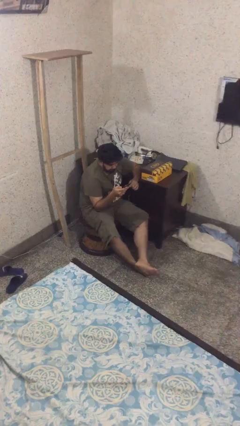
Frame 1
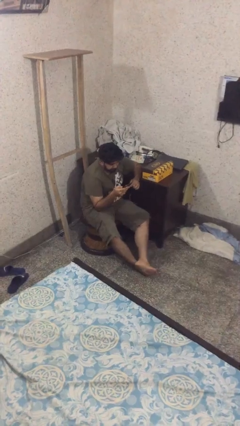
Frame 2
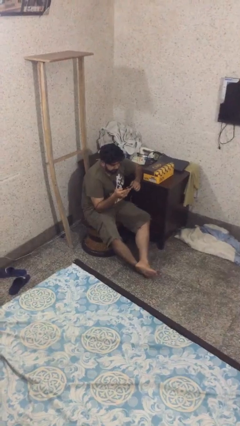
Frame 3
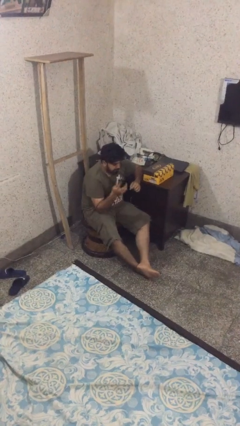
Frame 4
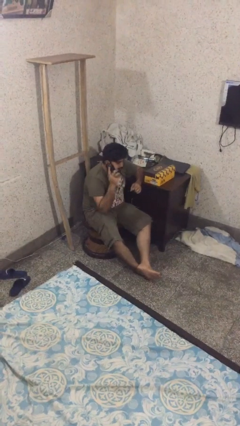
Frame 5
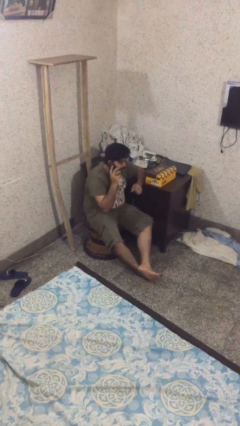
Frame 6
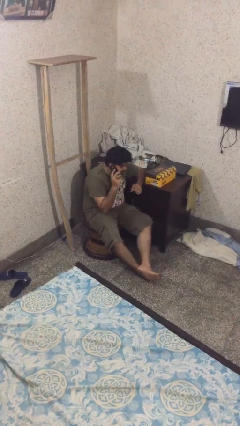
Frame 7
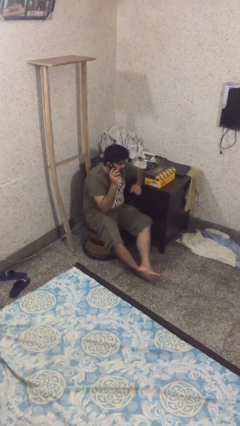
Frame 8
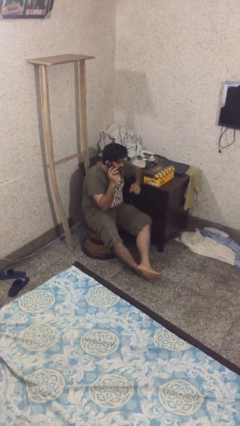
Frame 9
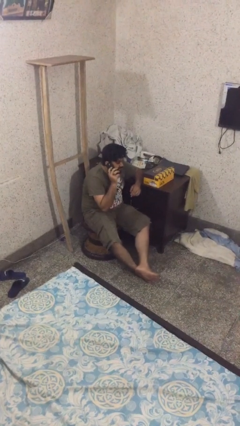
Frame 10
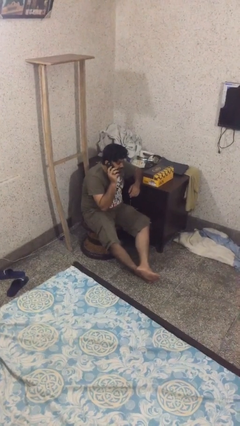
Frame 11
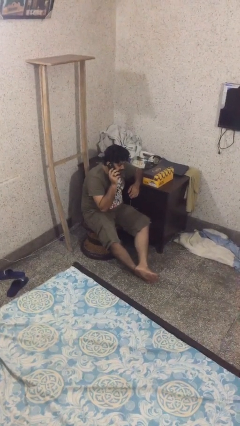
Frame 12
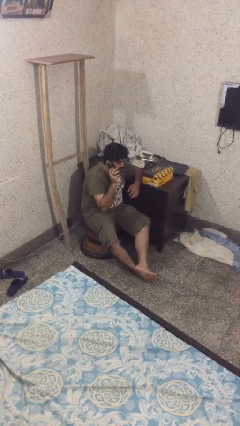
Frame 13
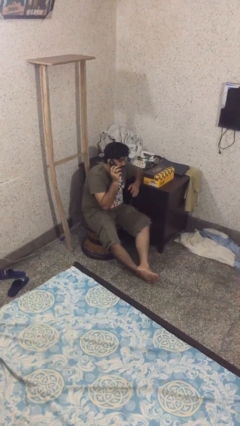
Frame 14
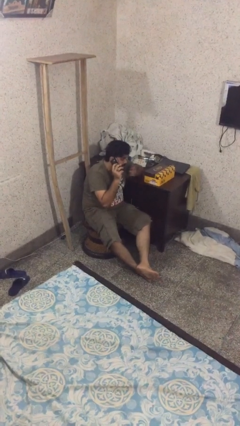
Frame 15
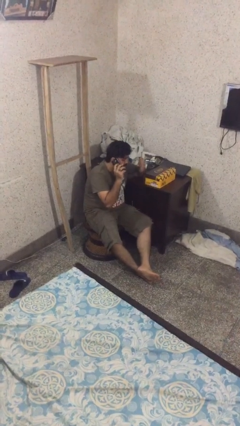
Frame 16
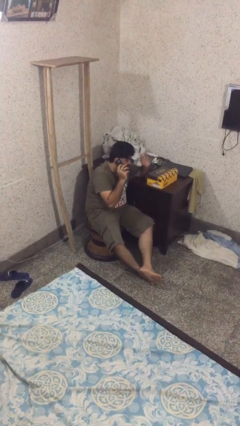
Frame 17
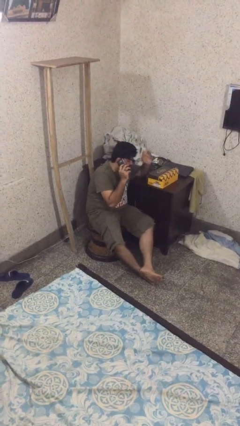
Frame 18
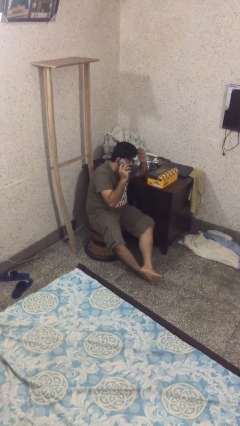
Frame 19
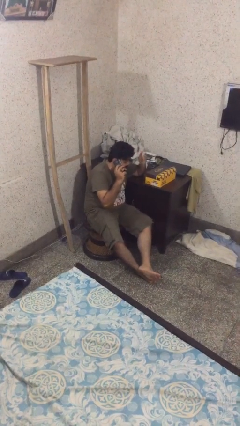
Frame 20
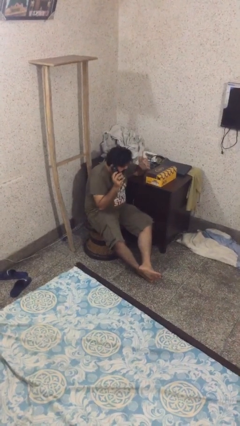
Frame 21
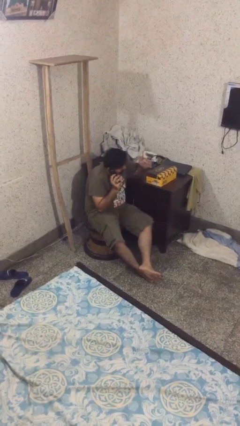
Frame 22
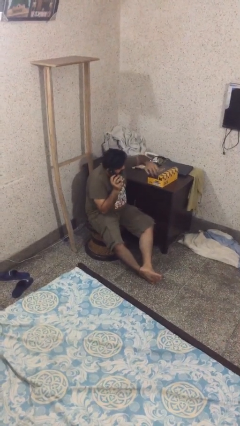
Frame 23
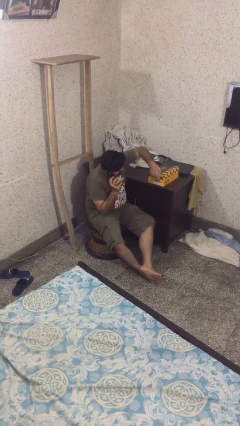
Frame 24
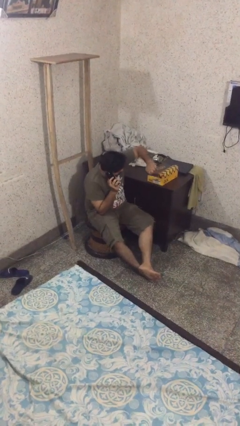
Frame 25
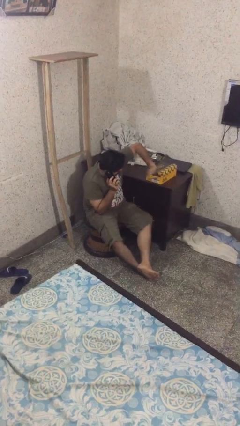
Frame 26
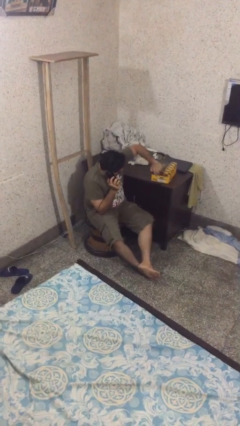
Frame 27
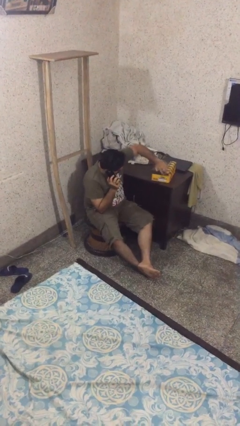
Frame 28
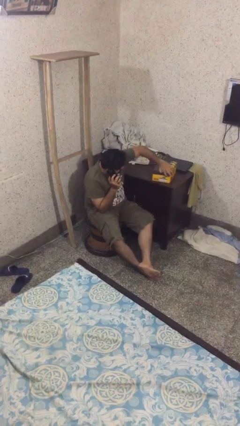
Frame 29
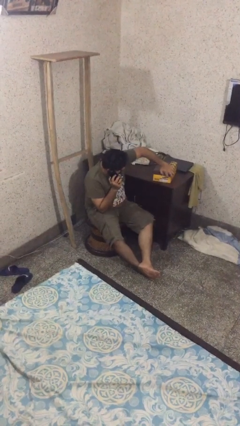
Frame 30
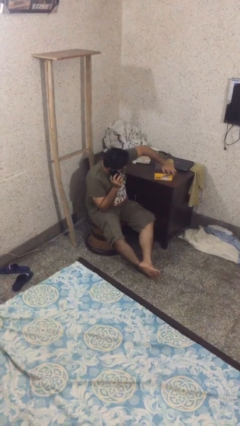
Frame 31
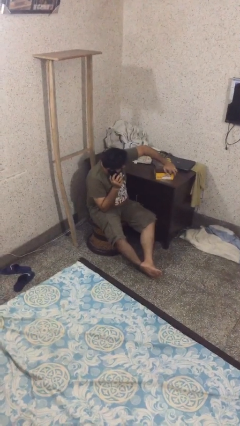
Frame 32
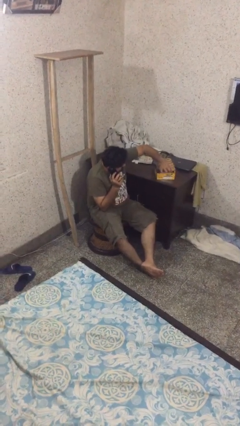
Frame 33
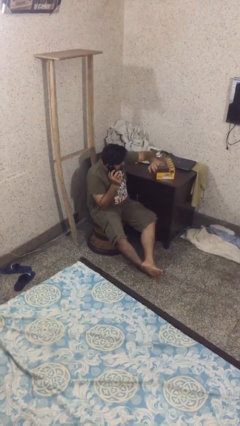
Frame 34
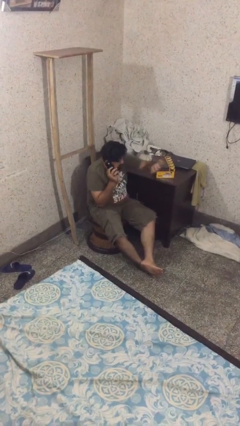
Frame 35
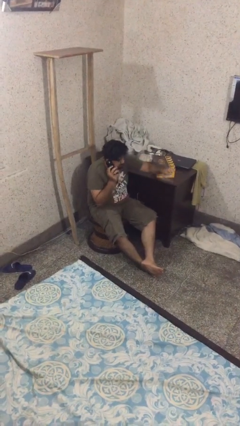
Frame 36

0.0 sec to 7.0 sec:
person talks on phone

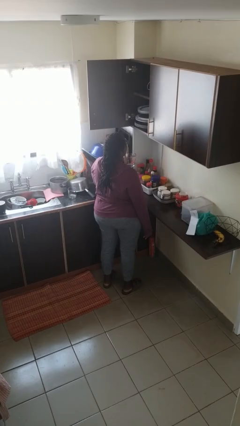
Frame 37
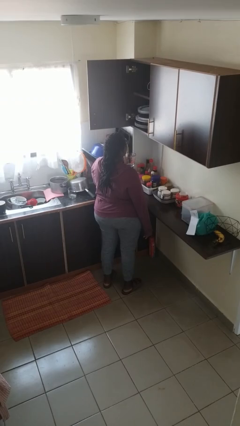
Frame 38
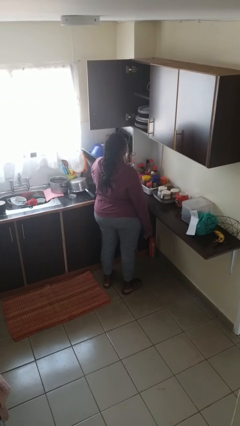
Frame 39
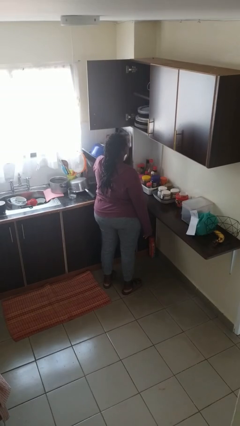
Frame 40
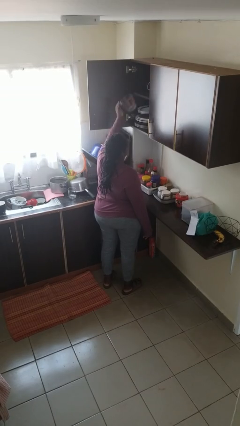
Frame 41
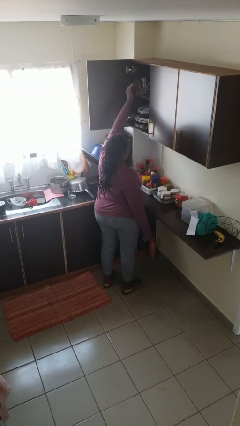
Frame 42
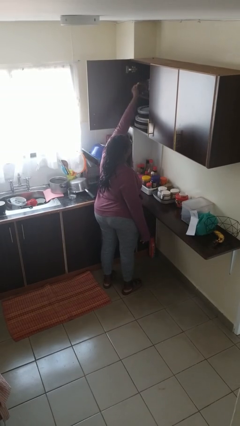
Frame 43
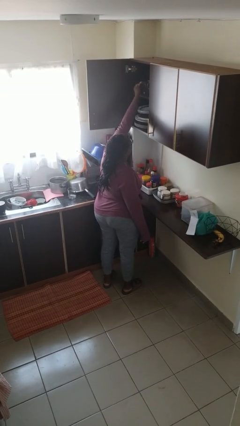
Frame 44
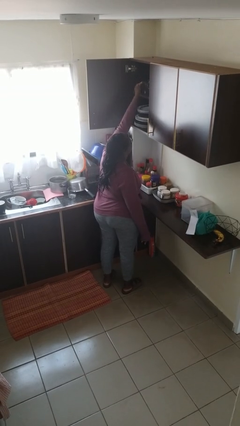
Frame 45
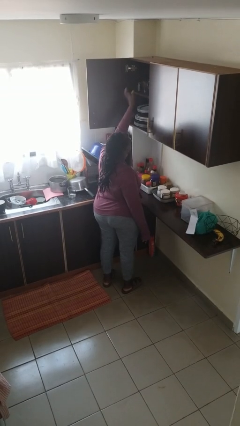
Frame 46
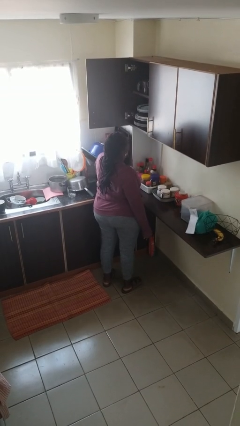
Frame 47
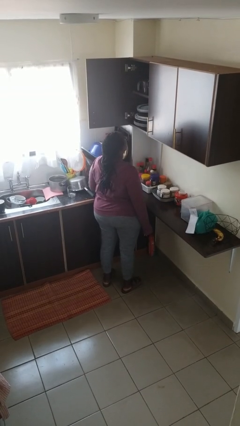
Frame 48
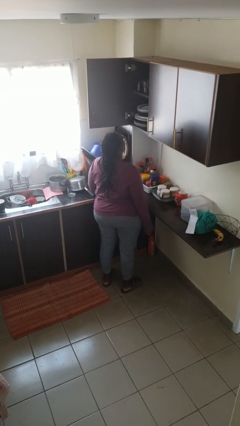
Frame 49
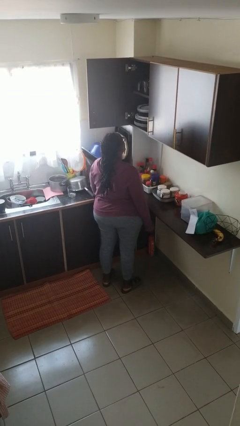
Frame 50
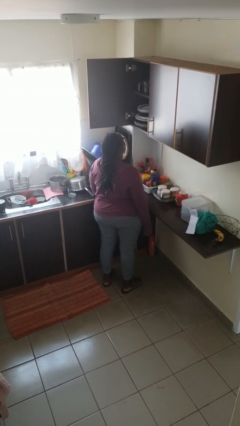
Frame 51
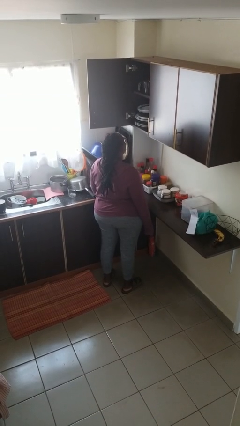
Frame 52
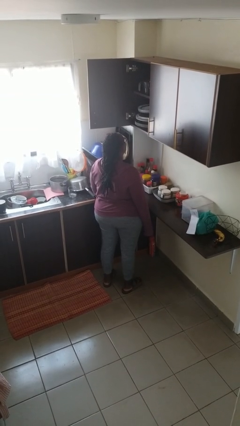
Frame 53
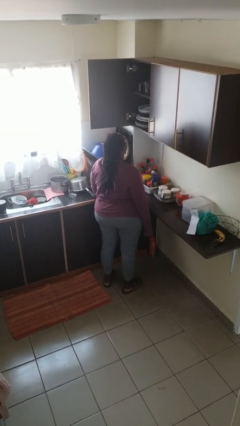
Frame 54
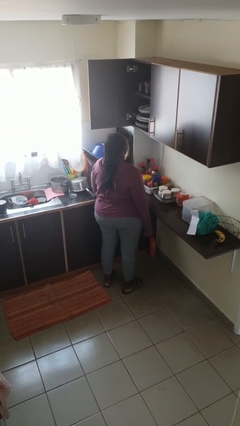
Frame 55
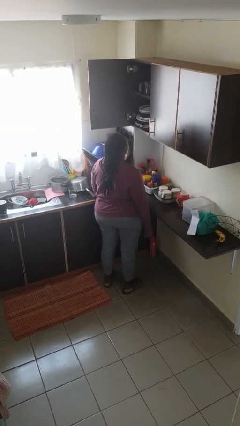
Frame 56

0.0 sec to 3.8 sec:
person puts down object into cabinet

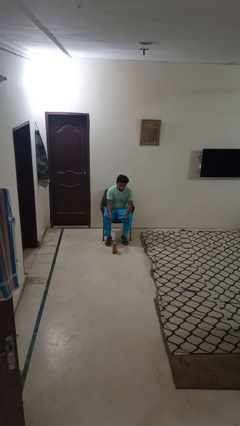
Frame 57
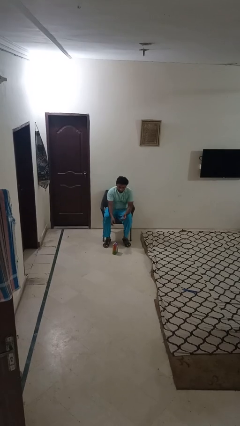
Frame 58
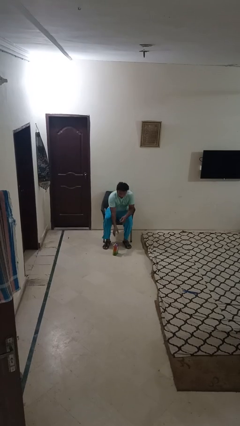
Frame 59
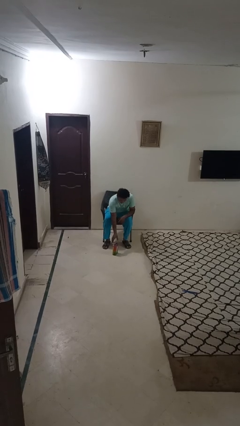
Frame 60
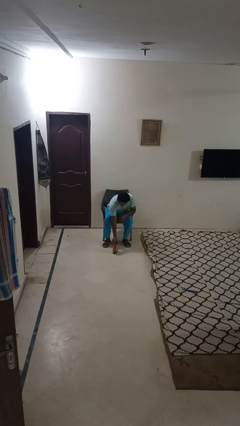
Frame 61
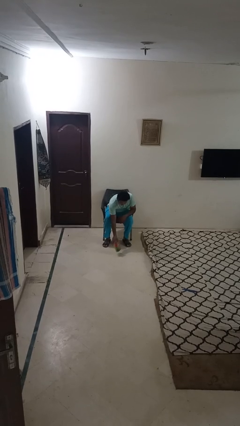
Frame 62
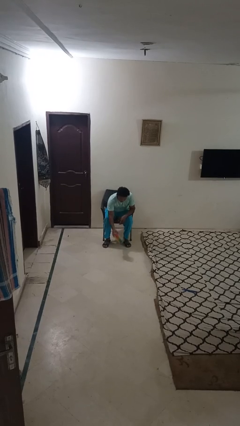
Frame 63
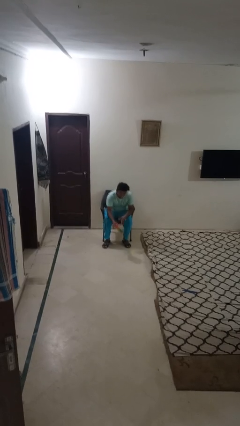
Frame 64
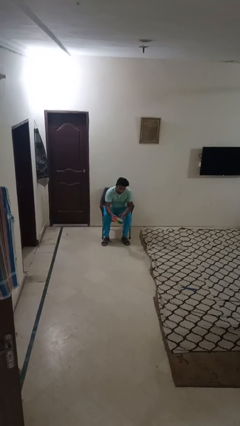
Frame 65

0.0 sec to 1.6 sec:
person picks up object from floor

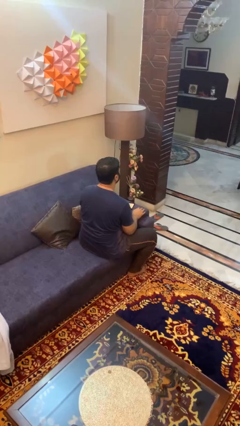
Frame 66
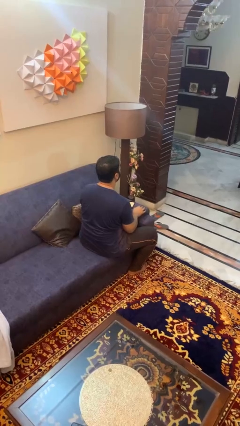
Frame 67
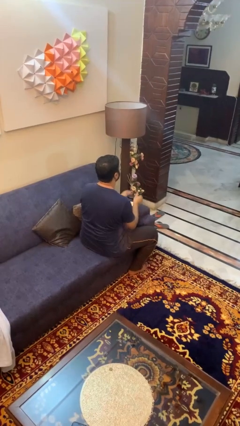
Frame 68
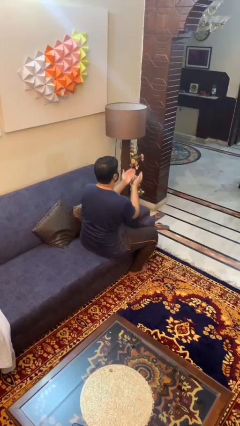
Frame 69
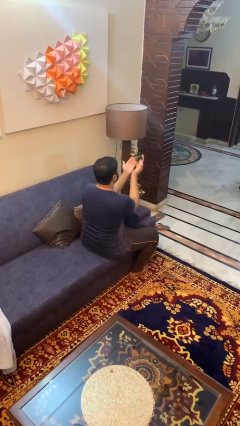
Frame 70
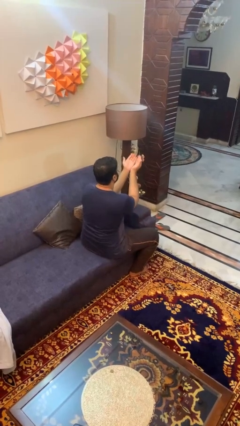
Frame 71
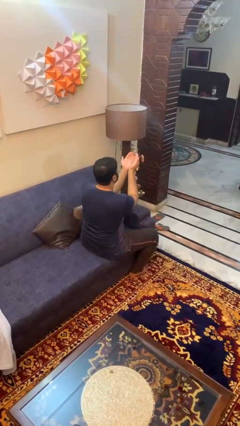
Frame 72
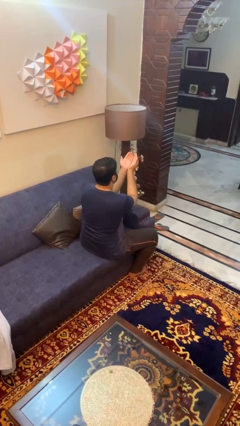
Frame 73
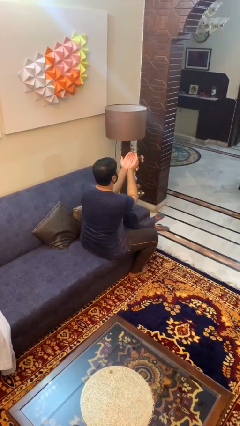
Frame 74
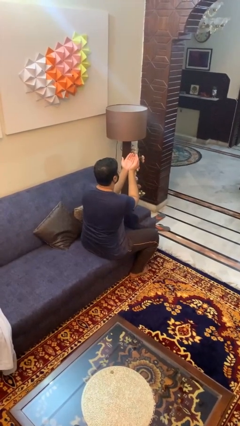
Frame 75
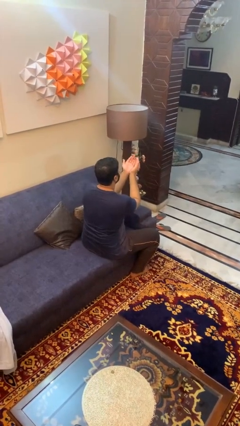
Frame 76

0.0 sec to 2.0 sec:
person prays

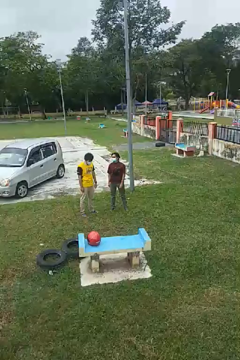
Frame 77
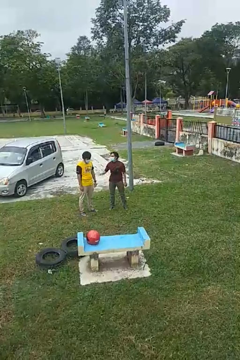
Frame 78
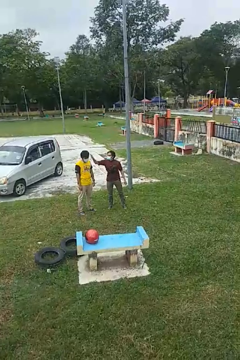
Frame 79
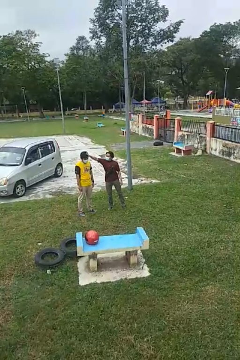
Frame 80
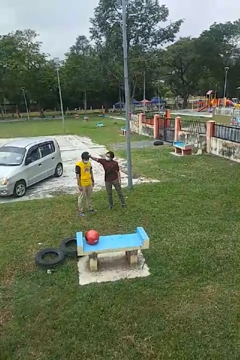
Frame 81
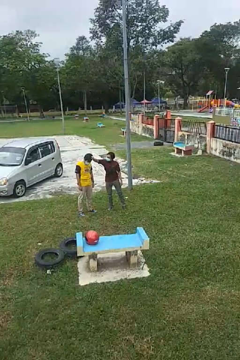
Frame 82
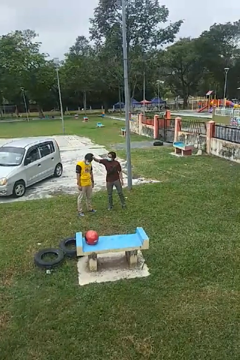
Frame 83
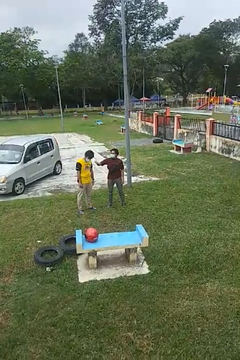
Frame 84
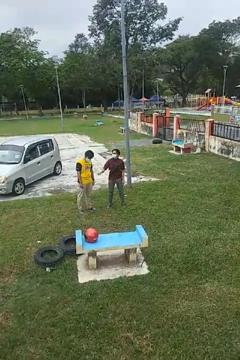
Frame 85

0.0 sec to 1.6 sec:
person grabs person by hair

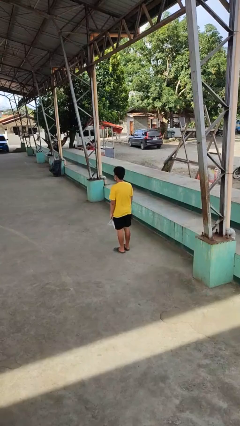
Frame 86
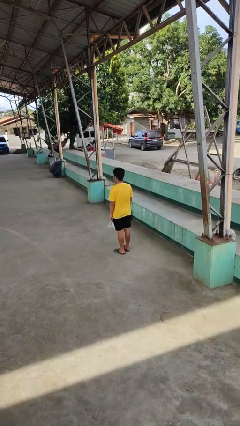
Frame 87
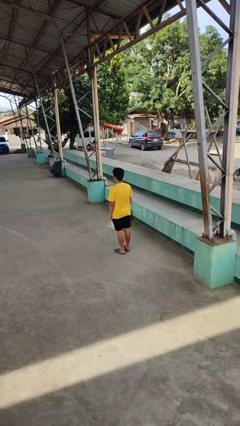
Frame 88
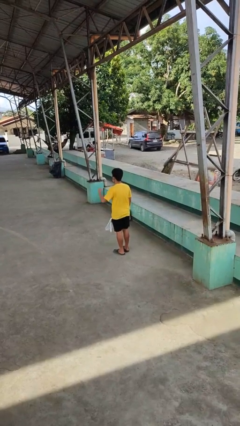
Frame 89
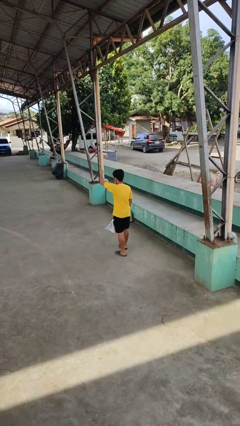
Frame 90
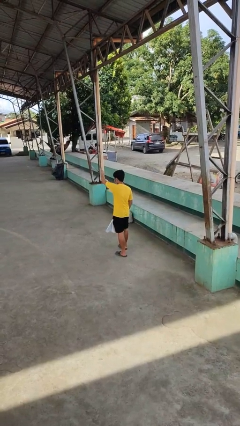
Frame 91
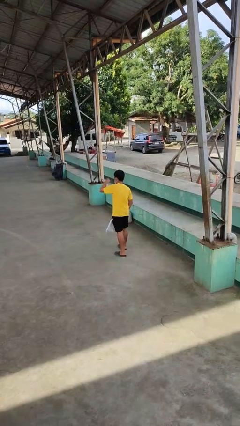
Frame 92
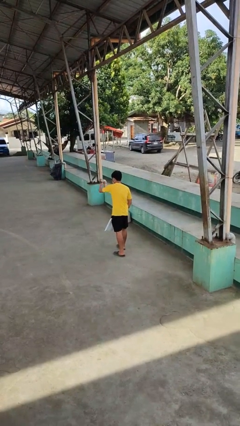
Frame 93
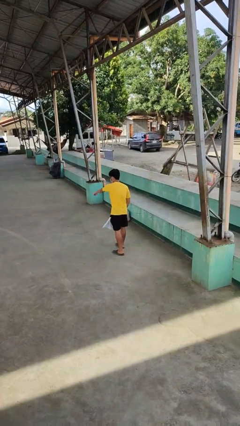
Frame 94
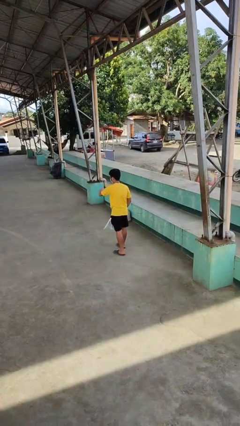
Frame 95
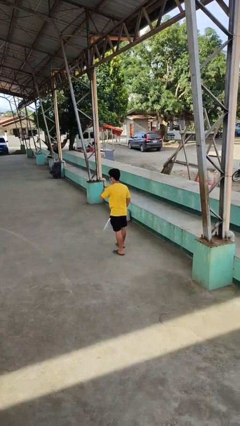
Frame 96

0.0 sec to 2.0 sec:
person punches
